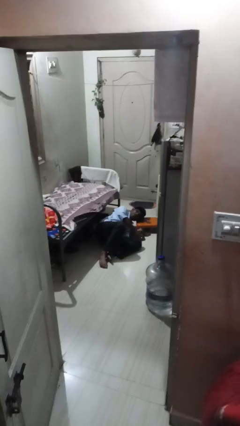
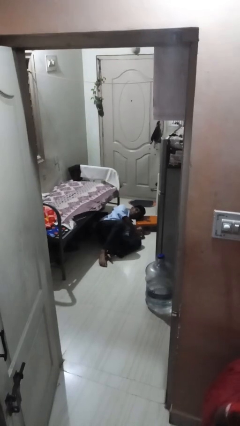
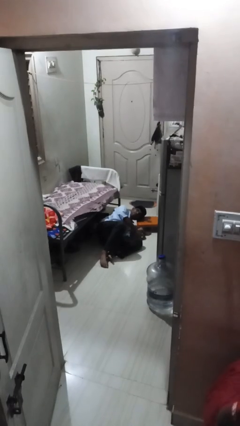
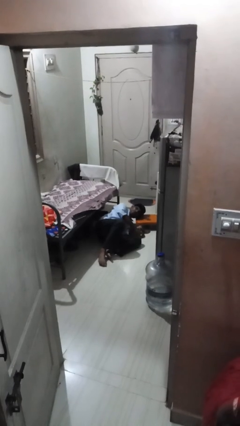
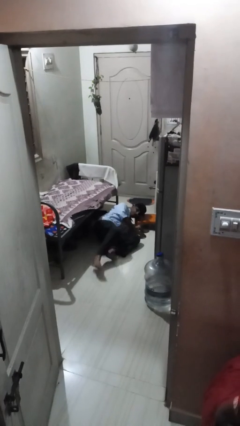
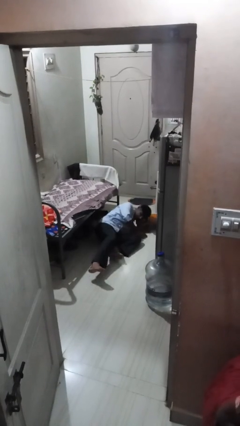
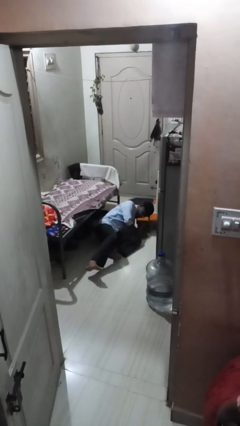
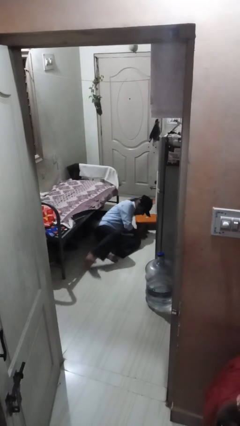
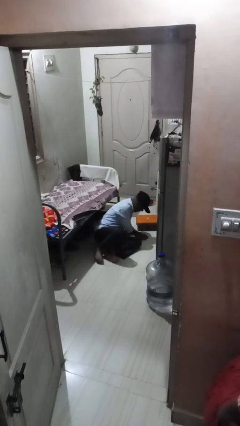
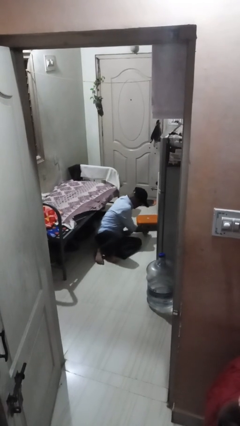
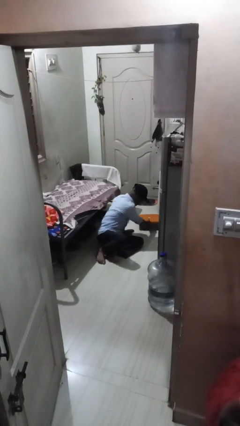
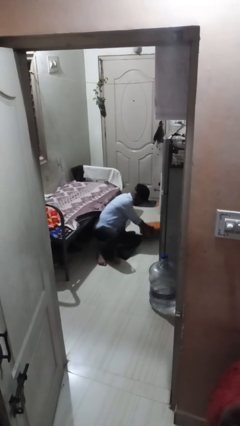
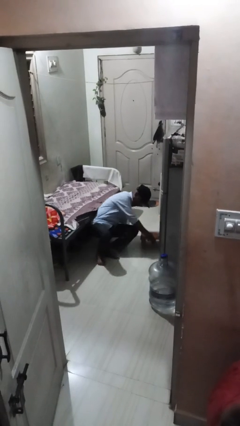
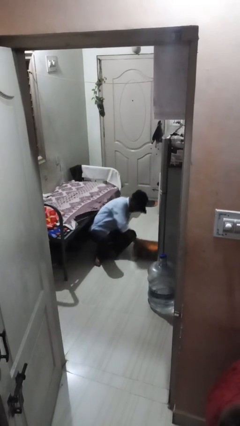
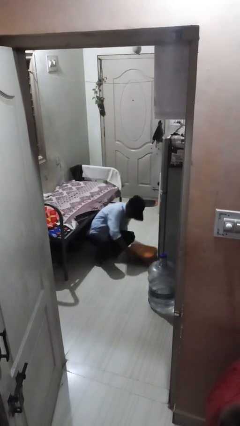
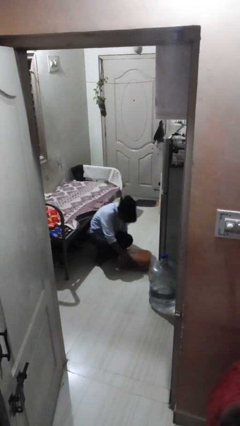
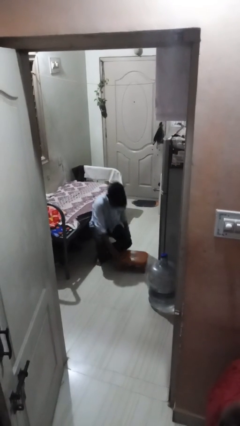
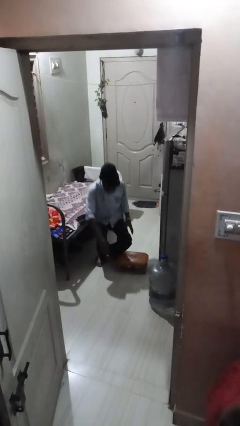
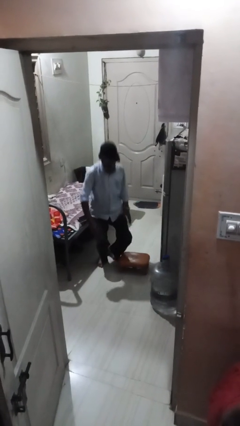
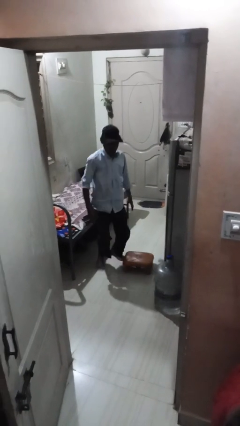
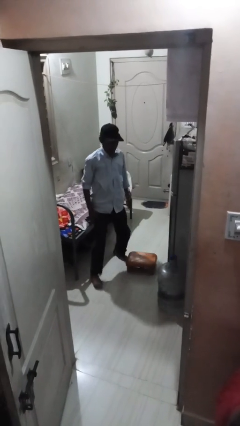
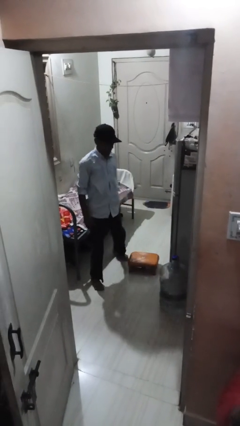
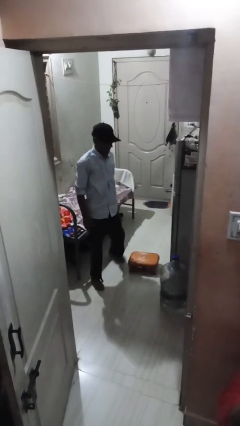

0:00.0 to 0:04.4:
person stands up from floor

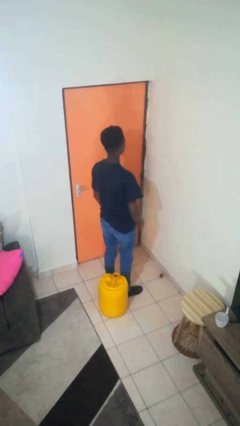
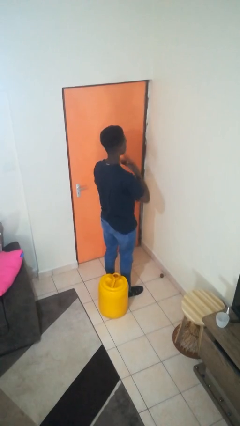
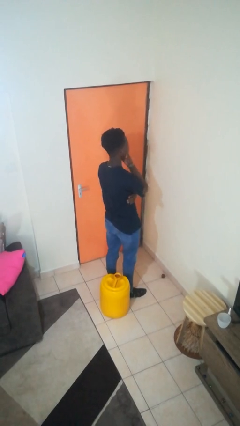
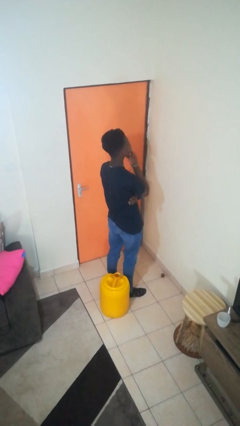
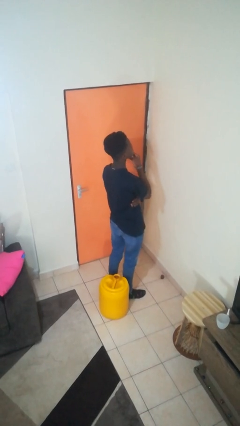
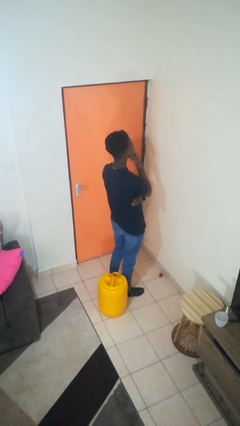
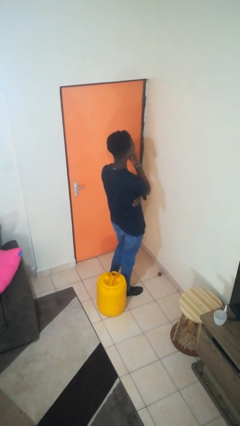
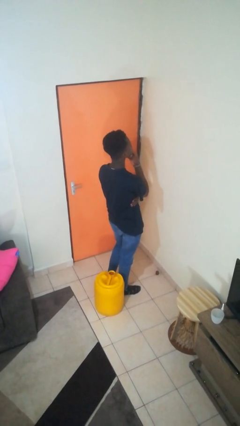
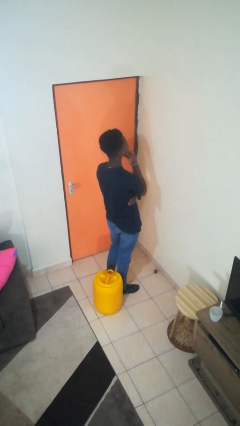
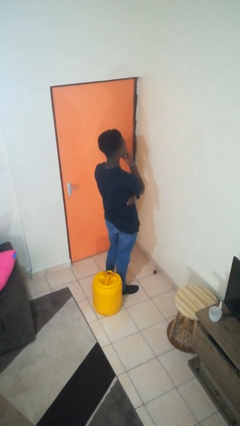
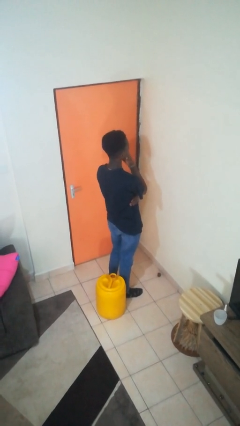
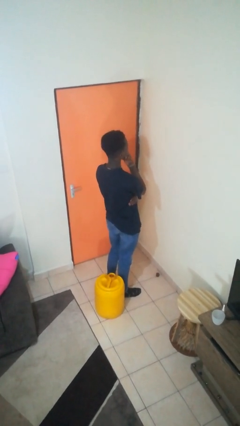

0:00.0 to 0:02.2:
person strokes chin

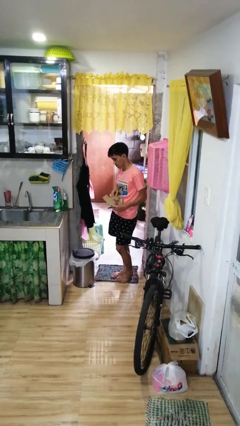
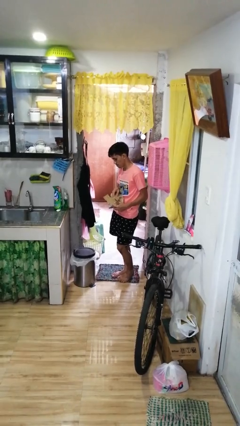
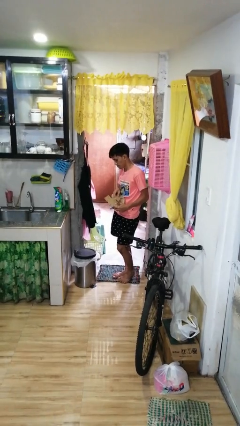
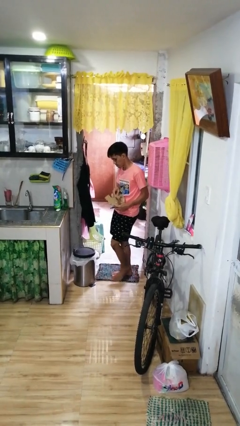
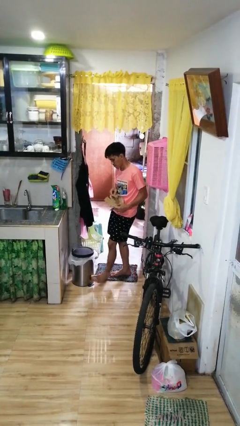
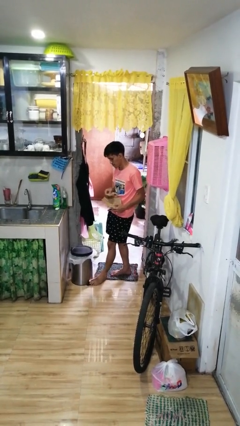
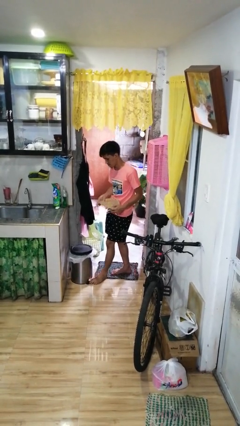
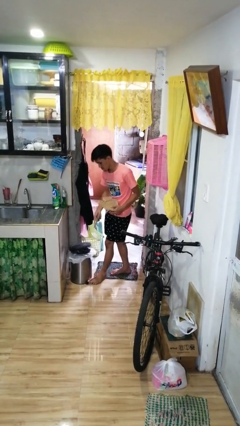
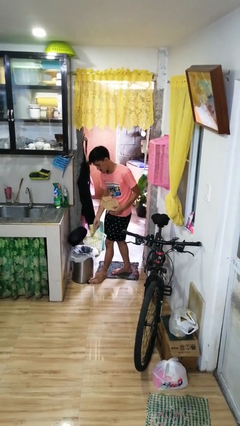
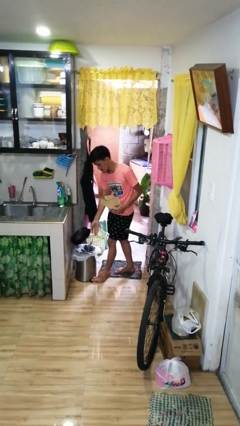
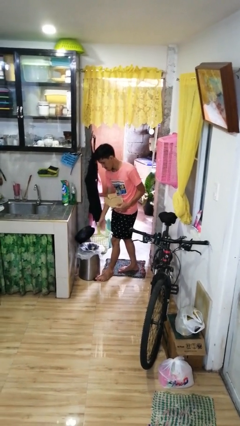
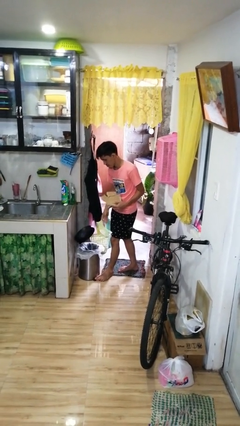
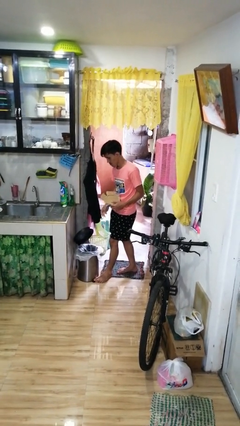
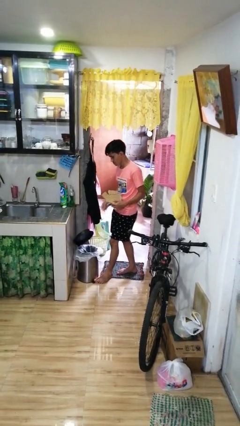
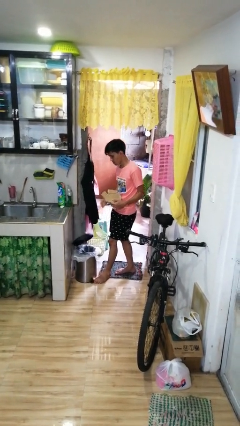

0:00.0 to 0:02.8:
person discards trash

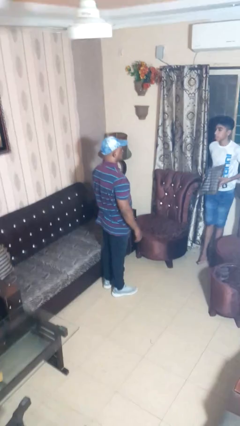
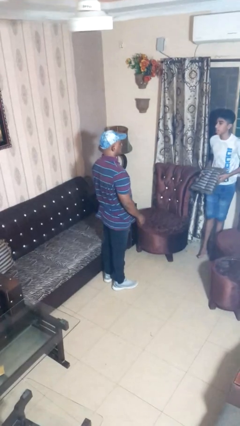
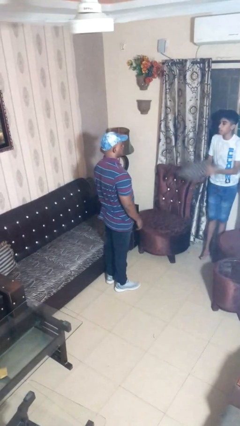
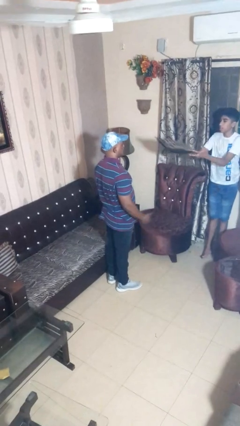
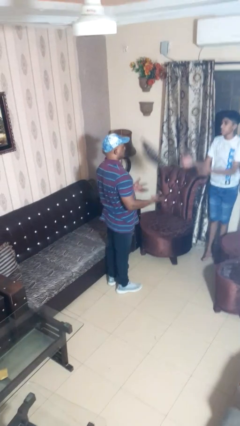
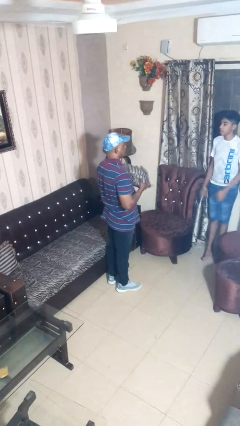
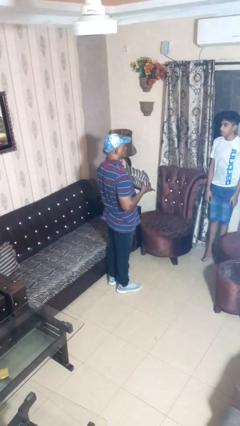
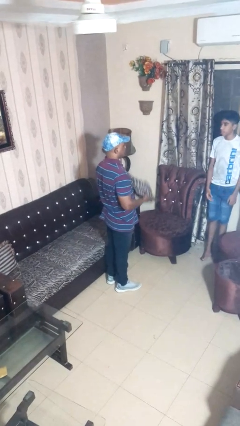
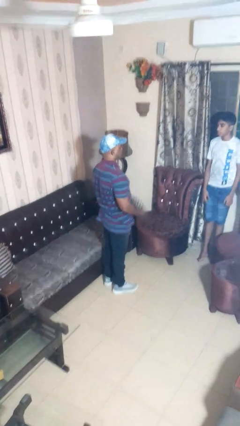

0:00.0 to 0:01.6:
person catches object from person

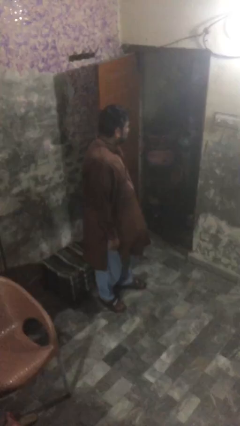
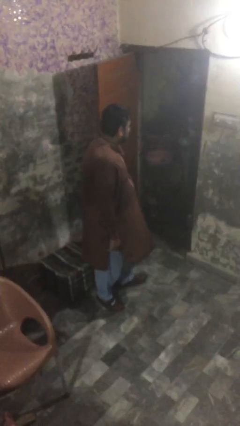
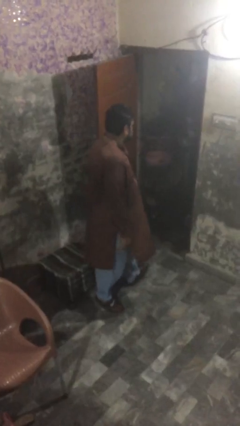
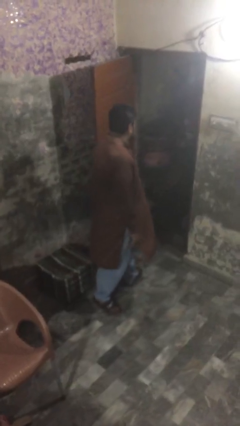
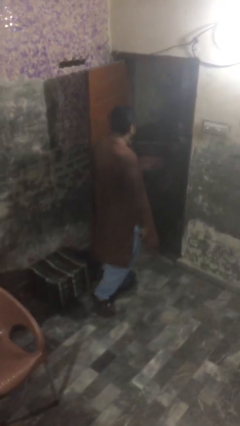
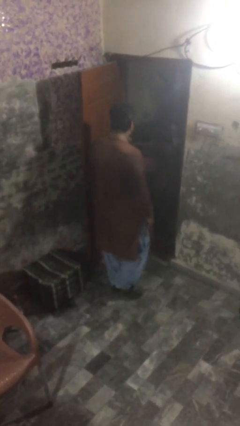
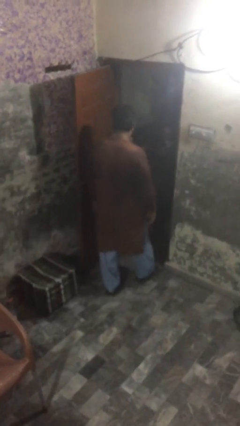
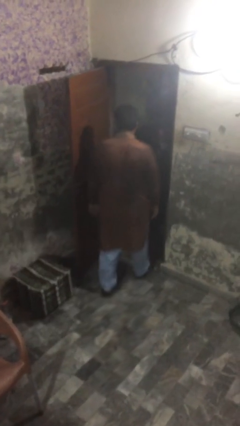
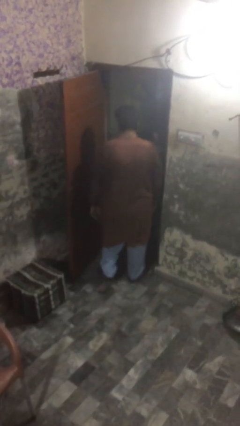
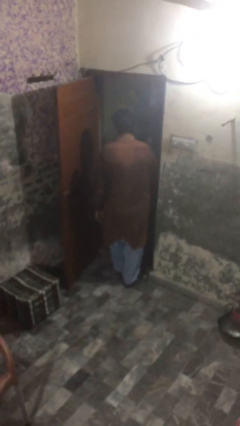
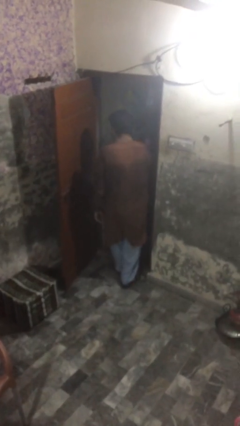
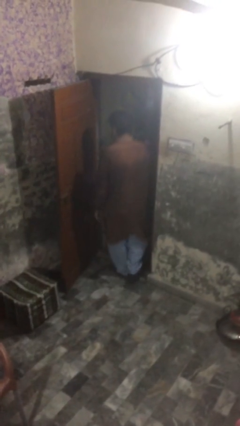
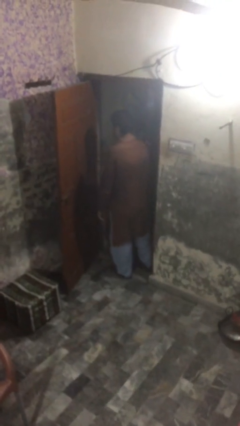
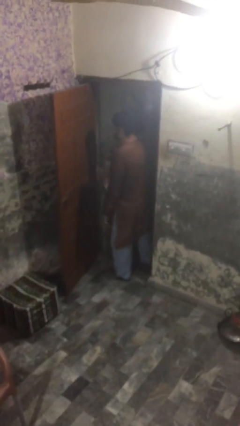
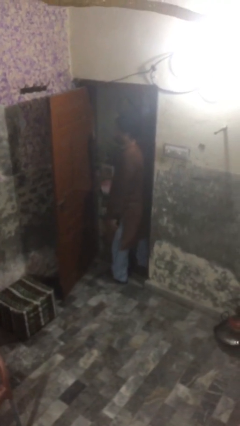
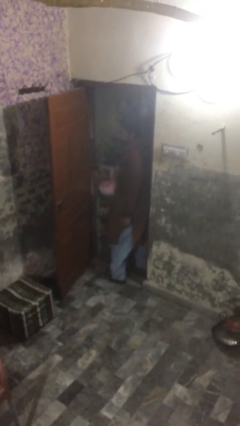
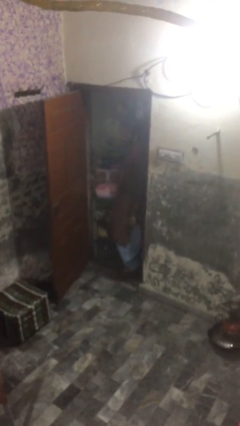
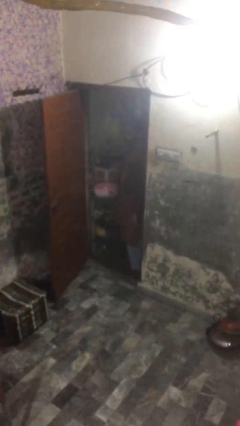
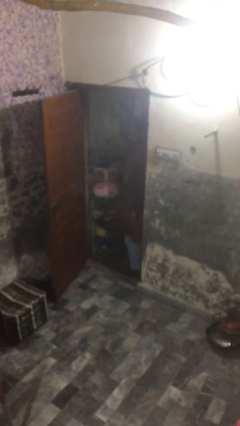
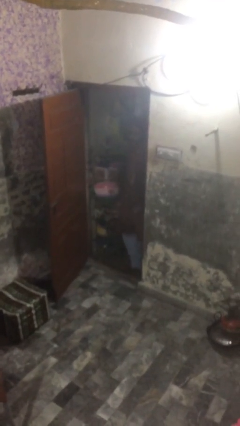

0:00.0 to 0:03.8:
person exits scene through structure

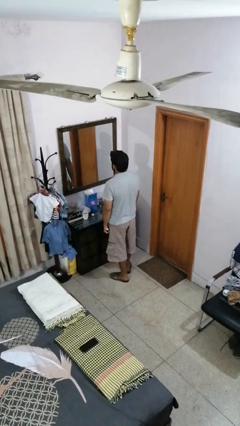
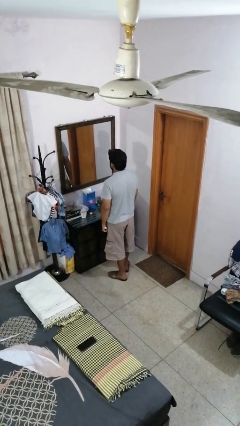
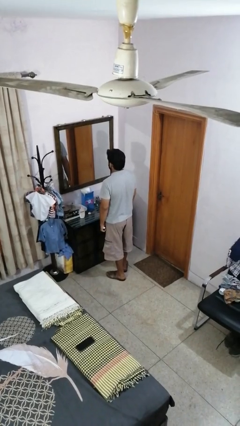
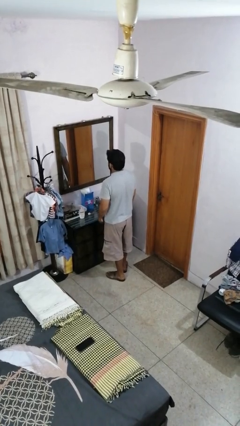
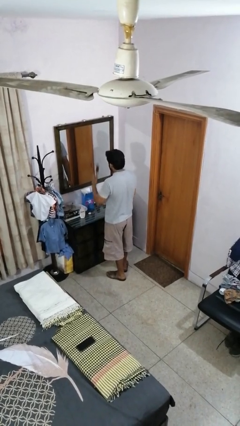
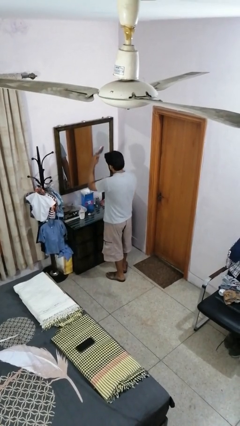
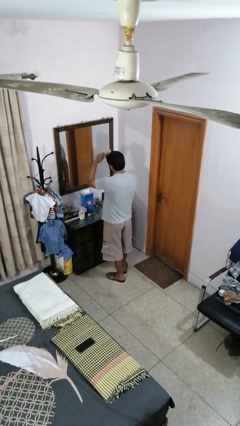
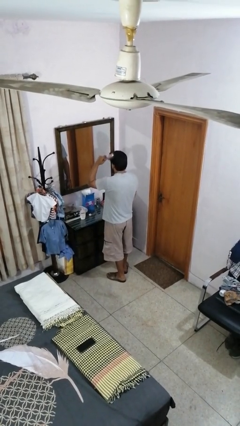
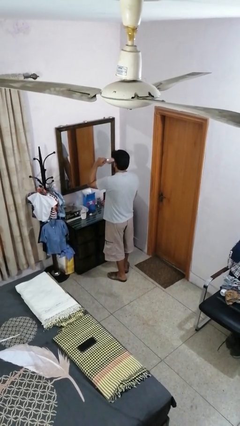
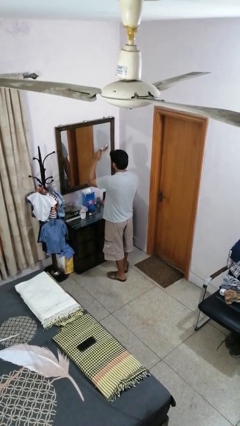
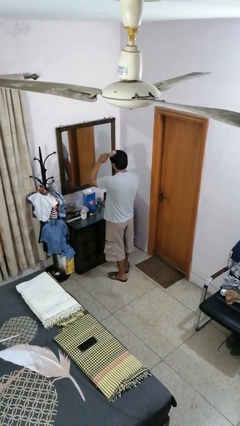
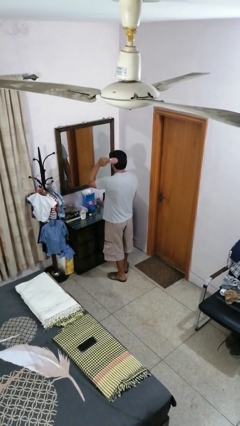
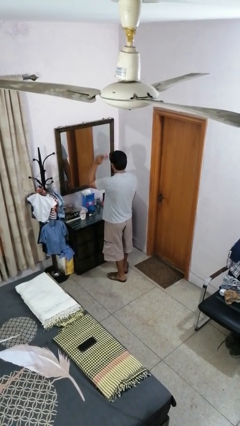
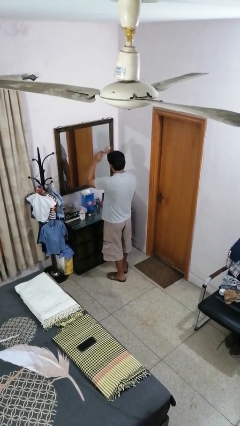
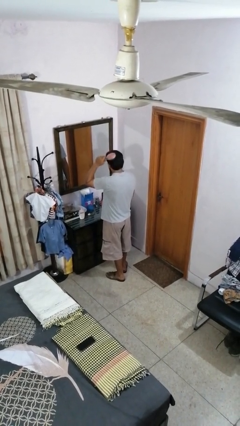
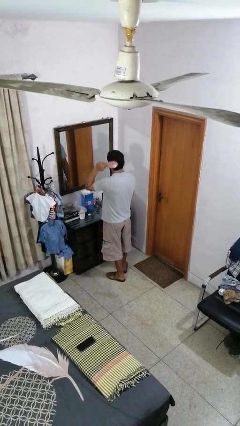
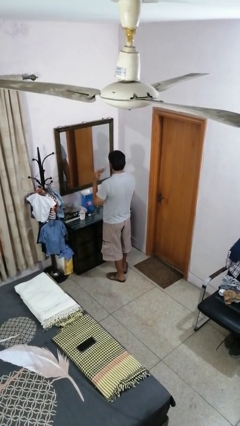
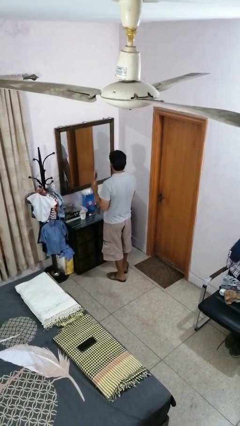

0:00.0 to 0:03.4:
person brushes hair
